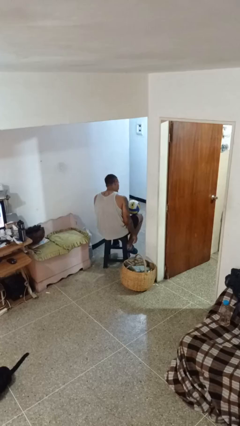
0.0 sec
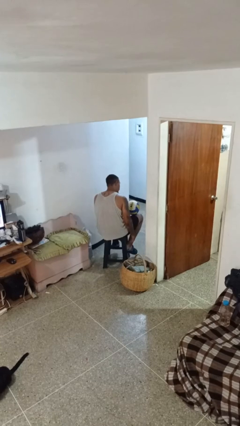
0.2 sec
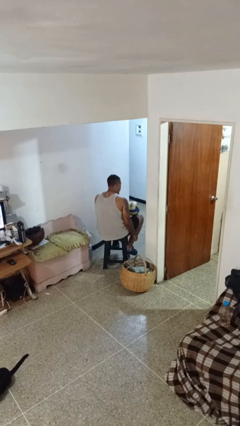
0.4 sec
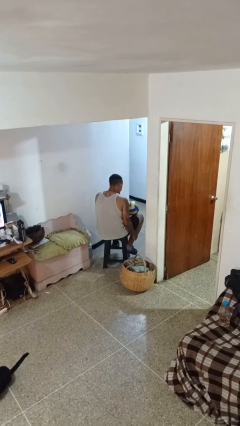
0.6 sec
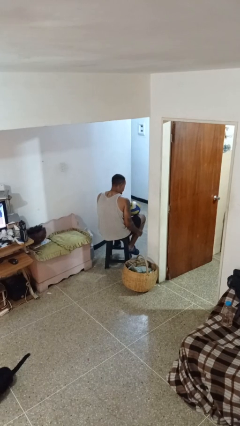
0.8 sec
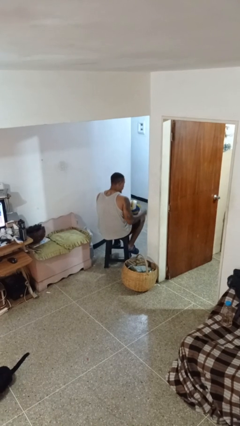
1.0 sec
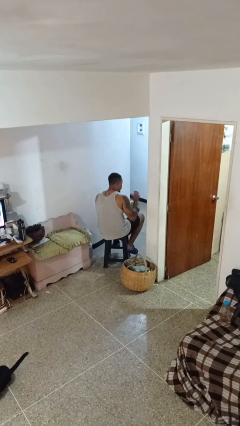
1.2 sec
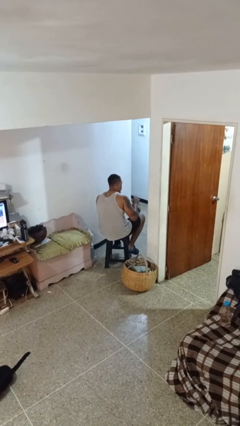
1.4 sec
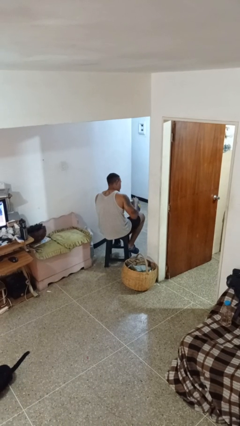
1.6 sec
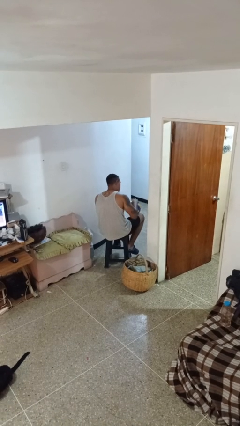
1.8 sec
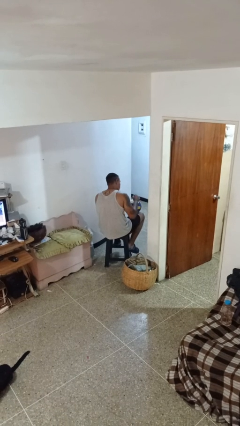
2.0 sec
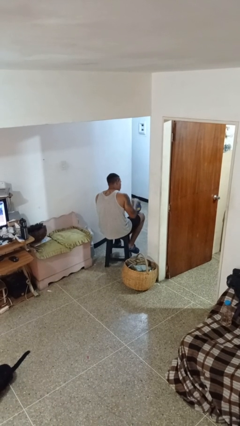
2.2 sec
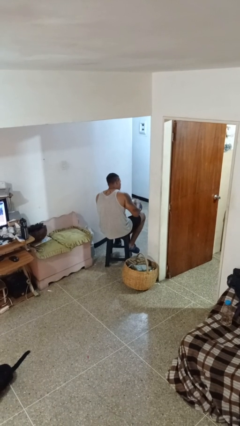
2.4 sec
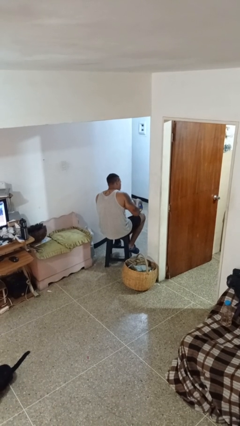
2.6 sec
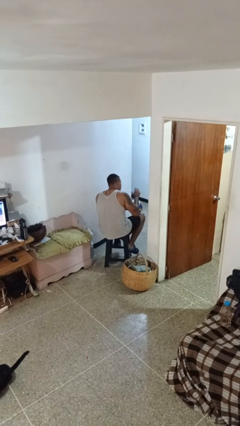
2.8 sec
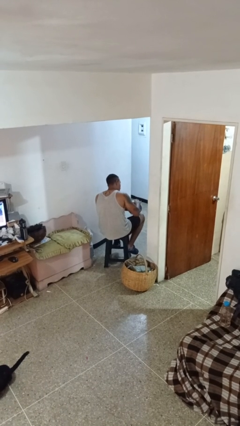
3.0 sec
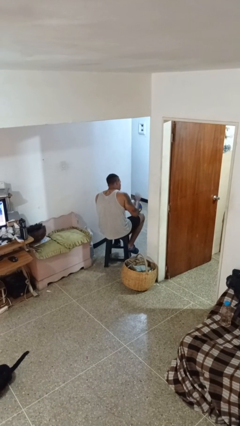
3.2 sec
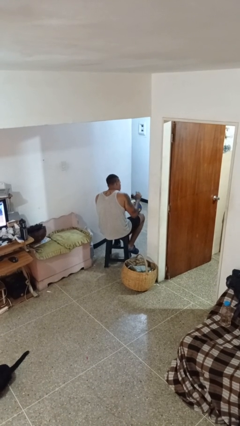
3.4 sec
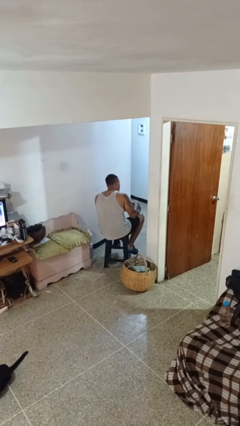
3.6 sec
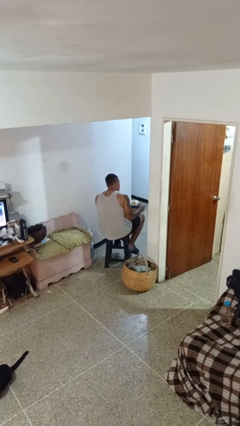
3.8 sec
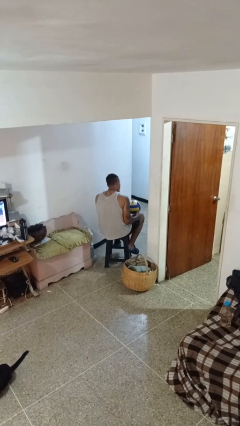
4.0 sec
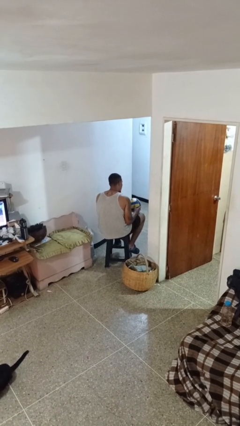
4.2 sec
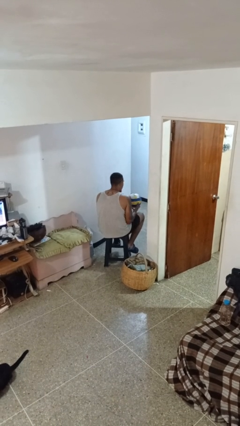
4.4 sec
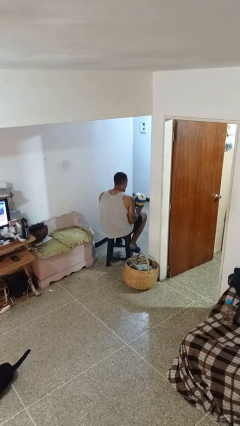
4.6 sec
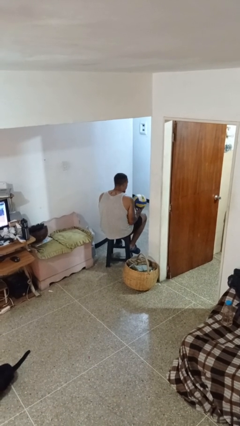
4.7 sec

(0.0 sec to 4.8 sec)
person taps object with finger

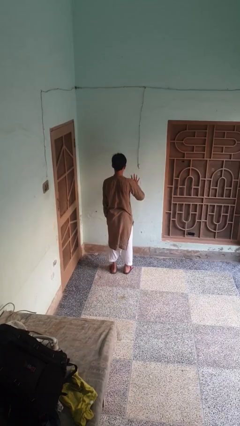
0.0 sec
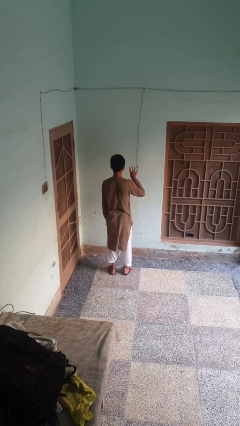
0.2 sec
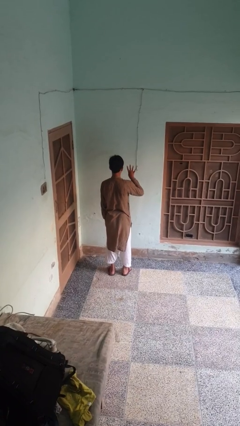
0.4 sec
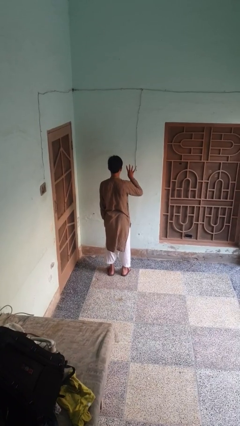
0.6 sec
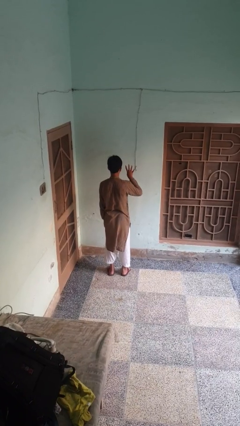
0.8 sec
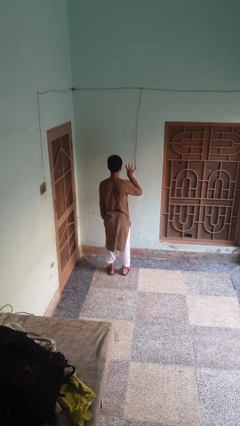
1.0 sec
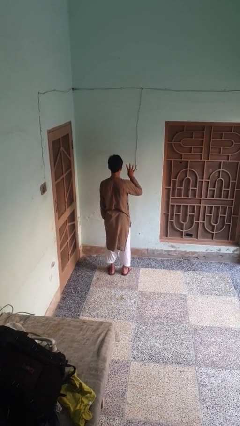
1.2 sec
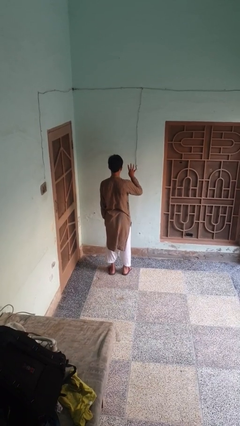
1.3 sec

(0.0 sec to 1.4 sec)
person gestures number four

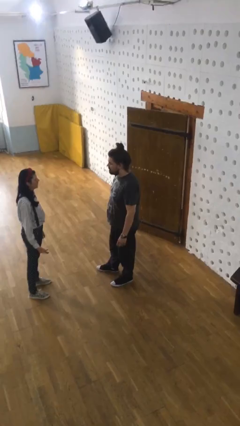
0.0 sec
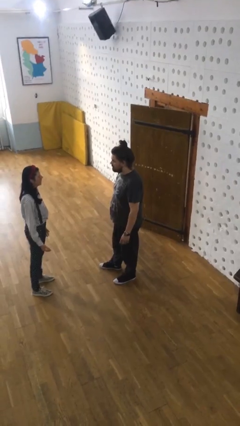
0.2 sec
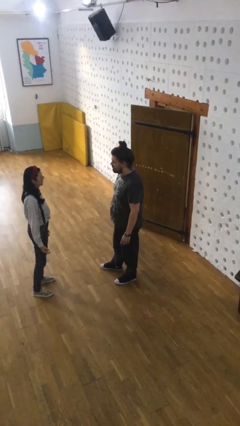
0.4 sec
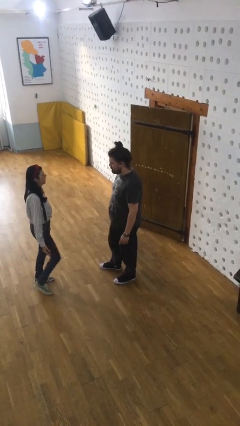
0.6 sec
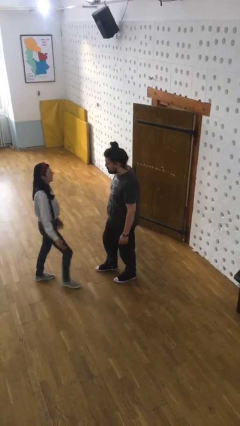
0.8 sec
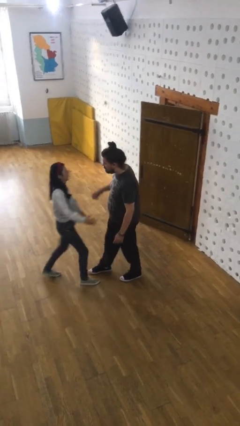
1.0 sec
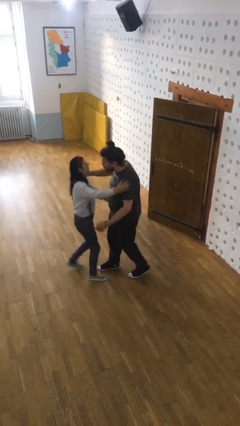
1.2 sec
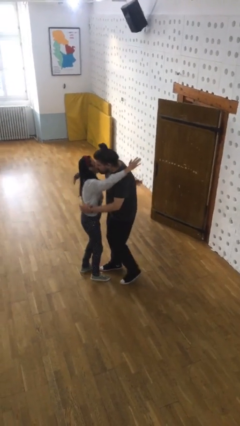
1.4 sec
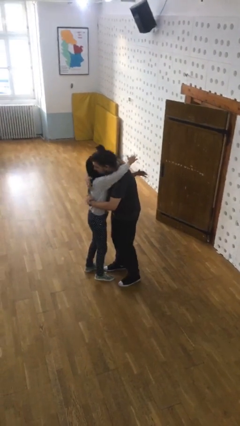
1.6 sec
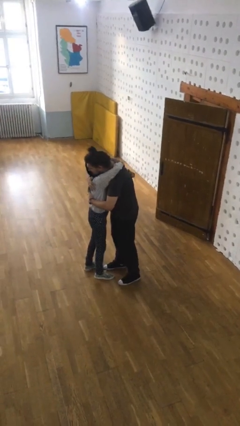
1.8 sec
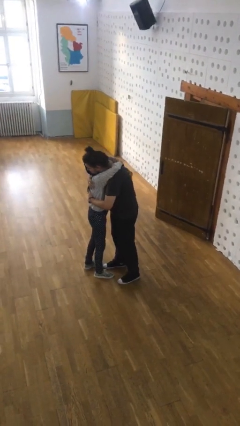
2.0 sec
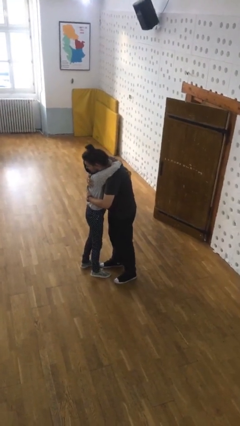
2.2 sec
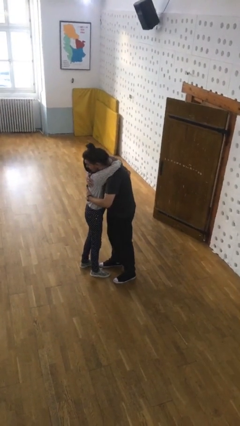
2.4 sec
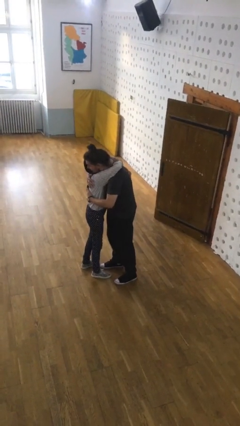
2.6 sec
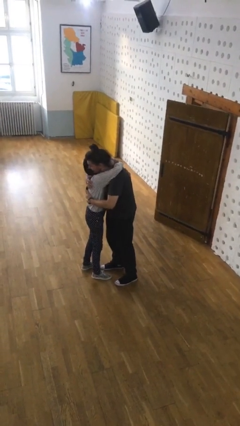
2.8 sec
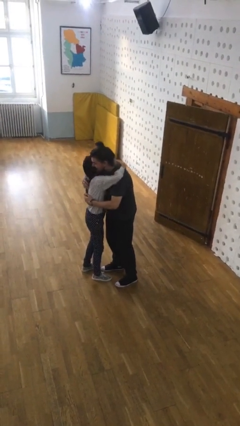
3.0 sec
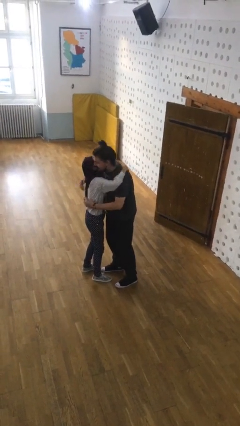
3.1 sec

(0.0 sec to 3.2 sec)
person embraces person

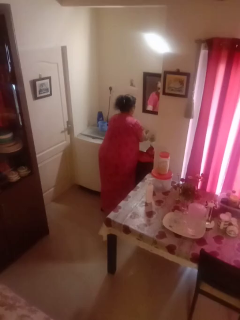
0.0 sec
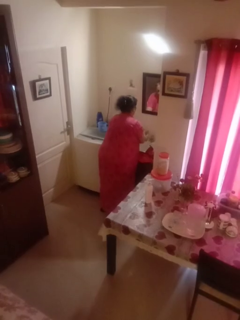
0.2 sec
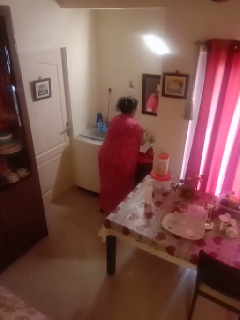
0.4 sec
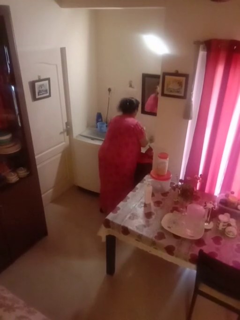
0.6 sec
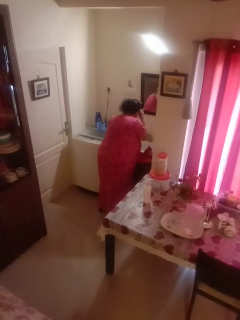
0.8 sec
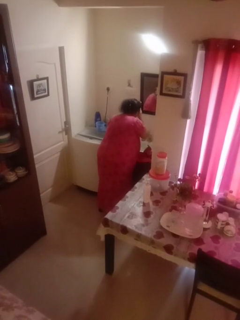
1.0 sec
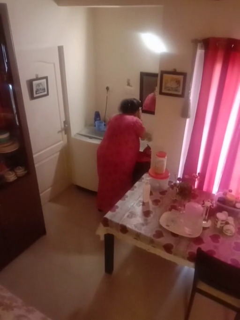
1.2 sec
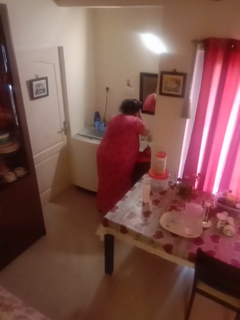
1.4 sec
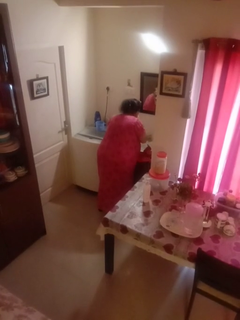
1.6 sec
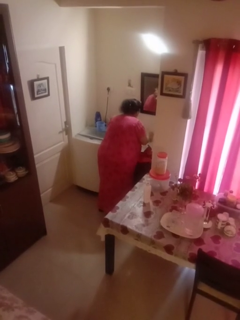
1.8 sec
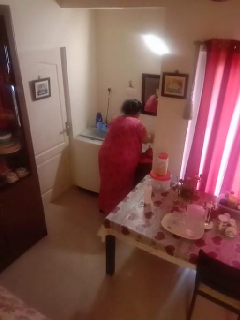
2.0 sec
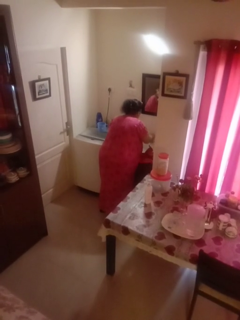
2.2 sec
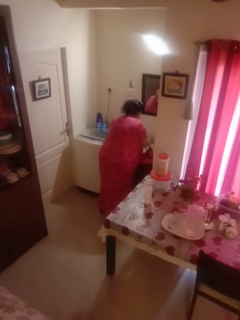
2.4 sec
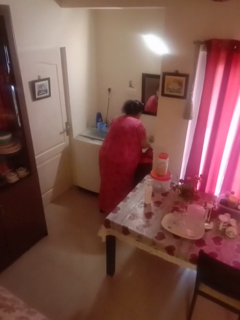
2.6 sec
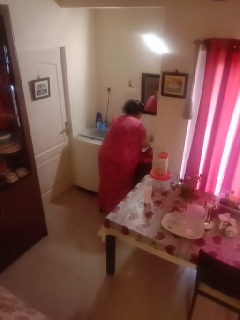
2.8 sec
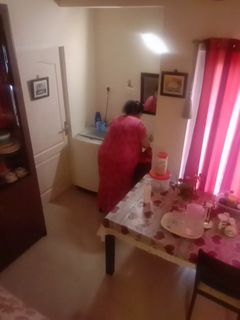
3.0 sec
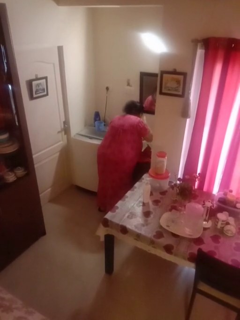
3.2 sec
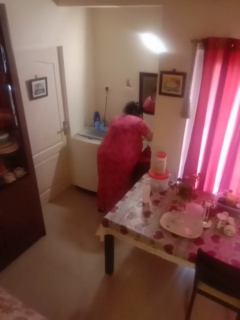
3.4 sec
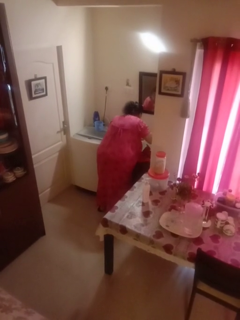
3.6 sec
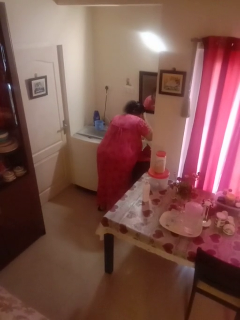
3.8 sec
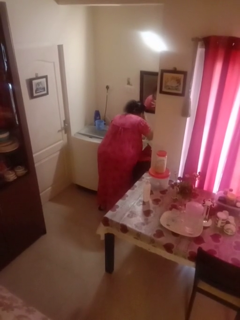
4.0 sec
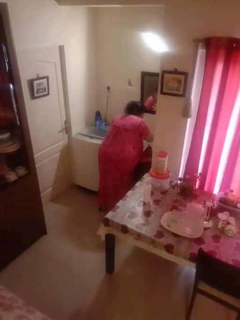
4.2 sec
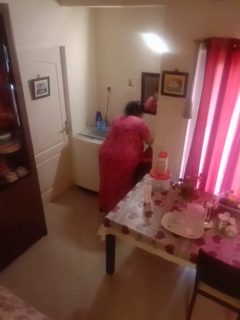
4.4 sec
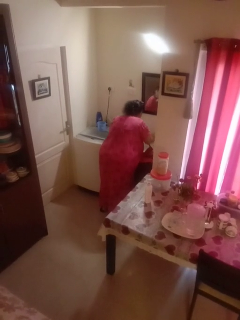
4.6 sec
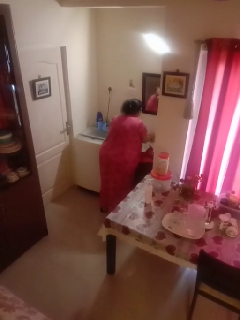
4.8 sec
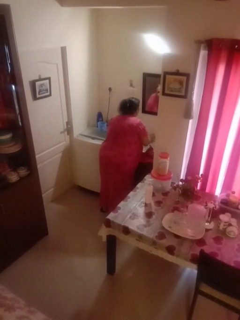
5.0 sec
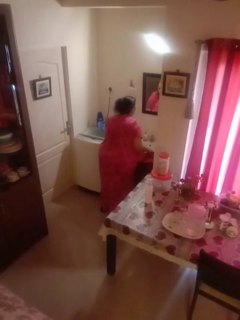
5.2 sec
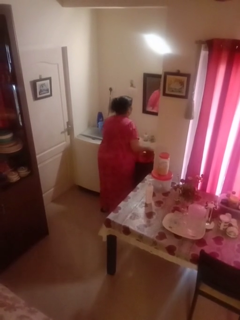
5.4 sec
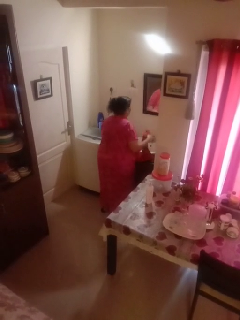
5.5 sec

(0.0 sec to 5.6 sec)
person washes face

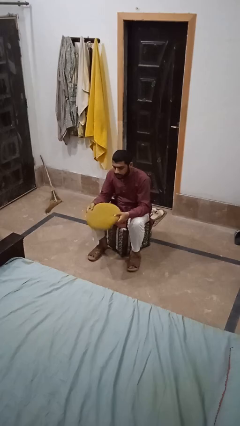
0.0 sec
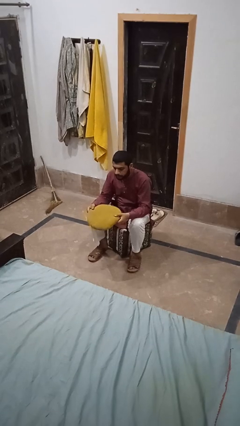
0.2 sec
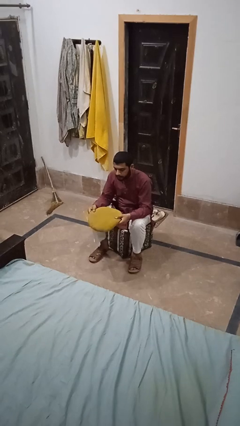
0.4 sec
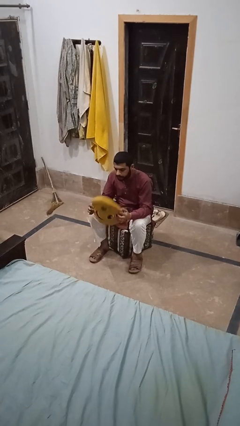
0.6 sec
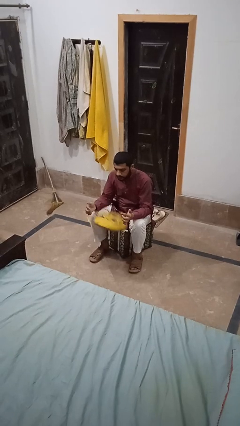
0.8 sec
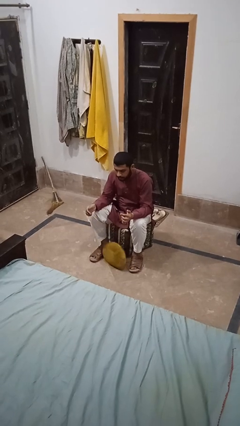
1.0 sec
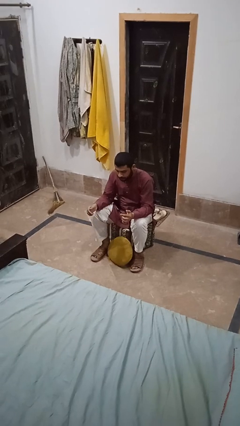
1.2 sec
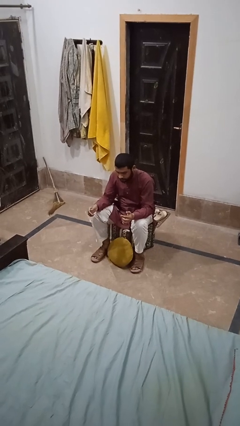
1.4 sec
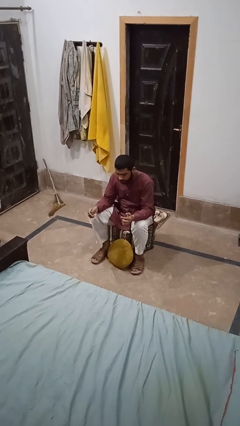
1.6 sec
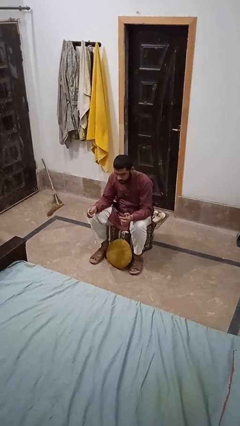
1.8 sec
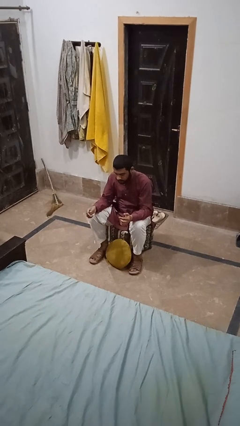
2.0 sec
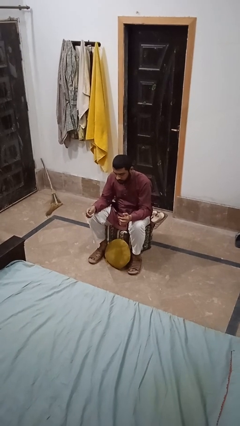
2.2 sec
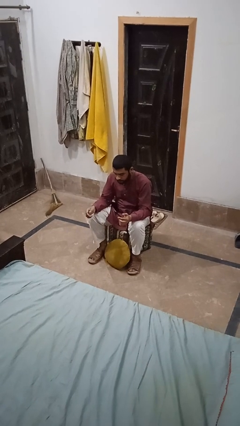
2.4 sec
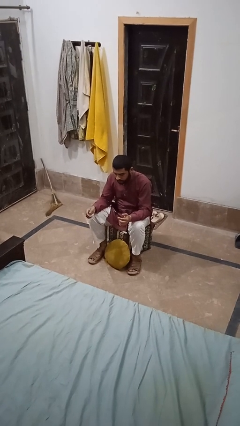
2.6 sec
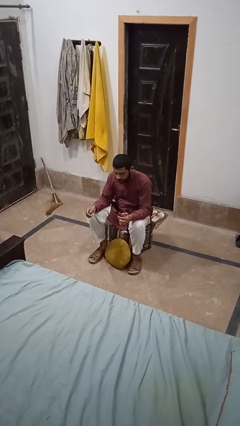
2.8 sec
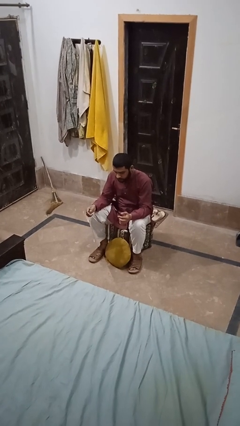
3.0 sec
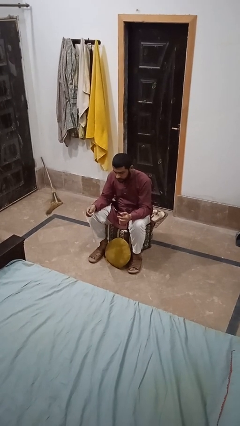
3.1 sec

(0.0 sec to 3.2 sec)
person drops object

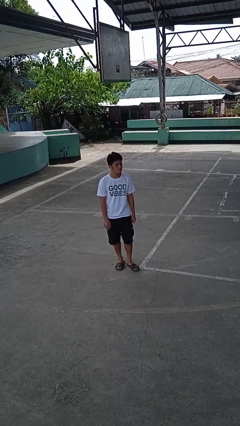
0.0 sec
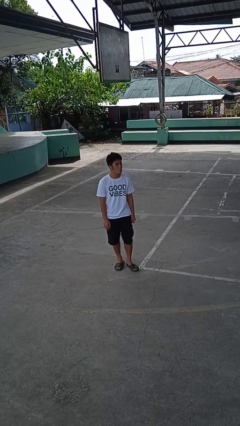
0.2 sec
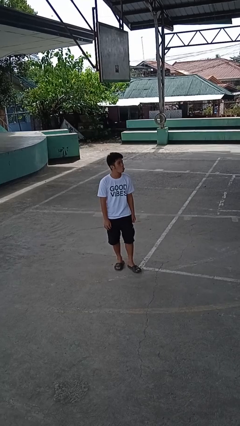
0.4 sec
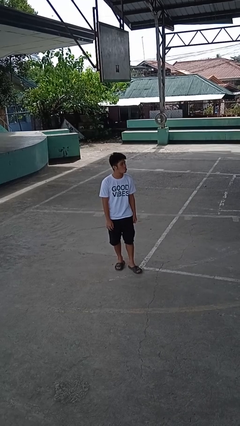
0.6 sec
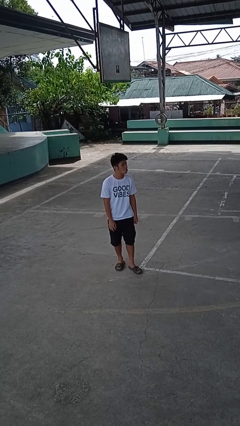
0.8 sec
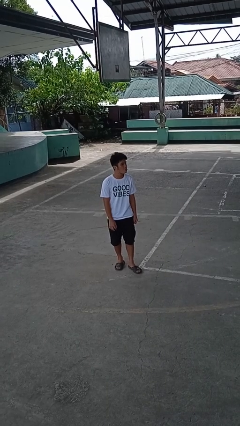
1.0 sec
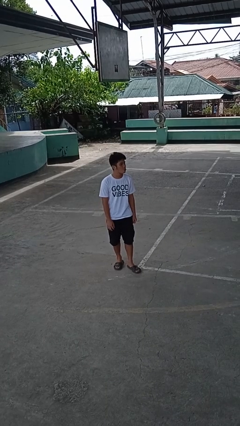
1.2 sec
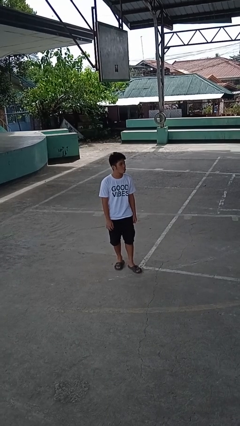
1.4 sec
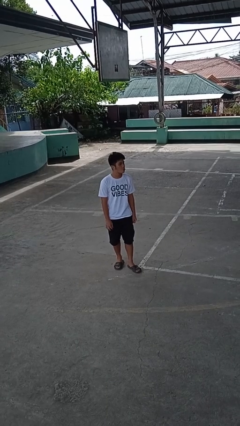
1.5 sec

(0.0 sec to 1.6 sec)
person sticks out tongue
